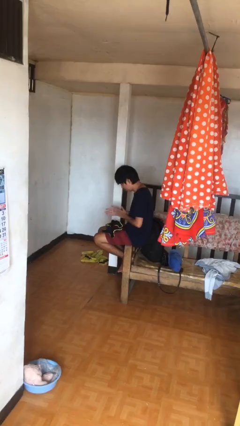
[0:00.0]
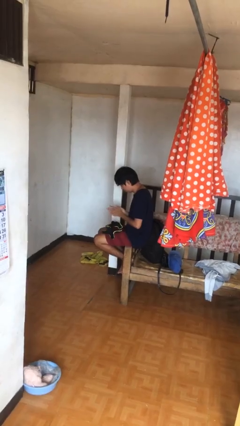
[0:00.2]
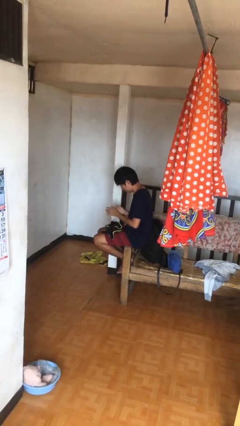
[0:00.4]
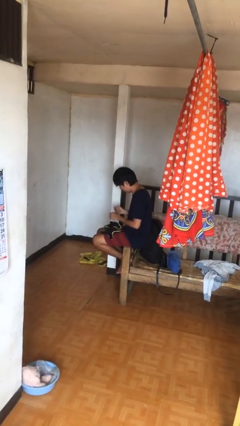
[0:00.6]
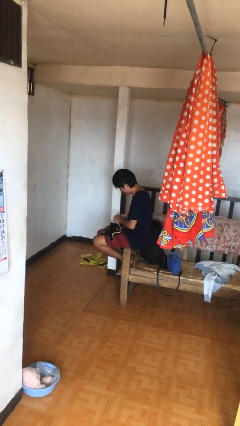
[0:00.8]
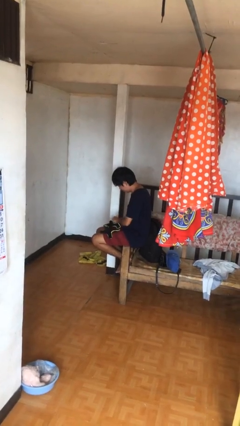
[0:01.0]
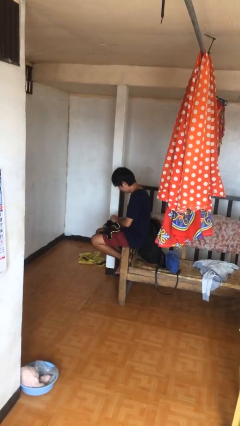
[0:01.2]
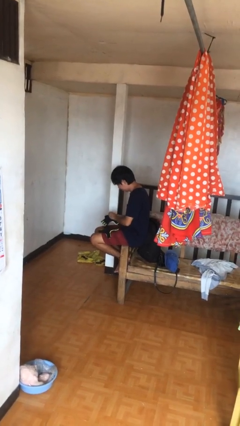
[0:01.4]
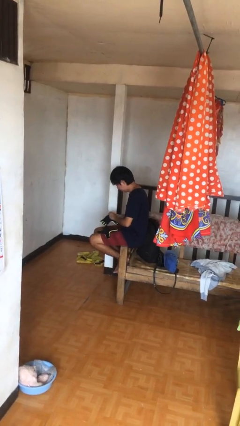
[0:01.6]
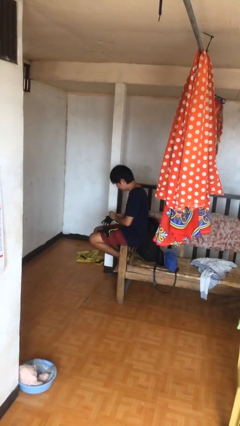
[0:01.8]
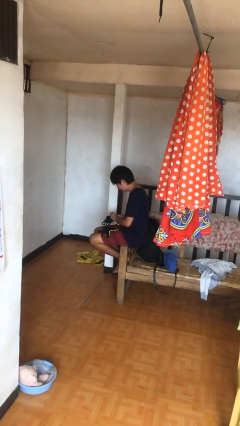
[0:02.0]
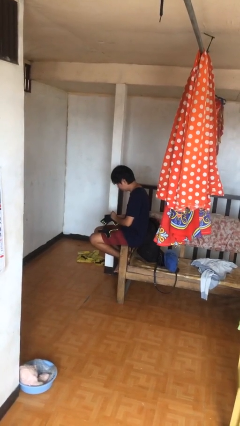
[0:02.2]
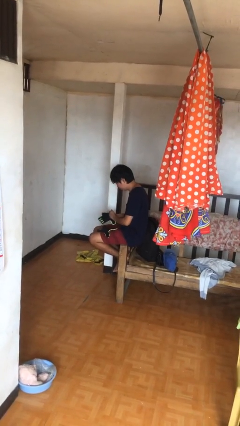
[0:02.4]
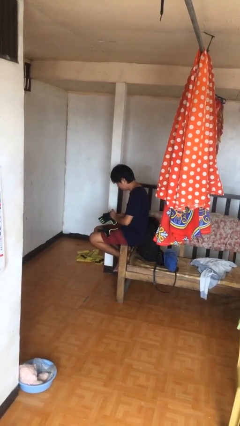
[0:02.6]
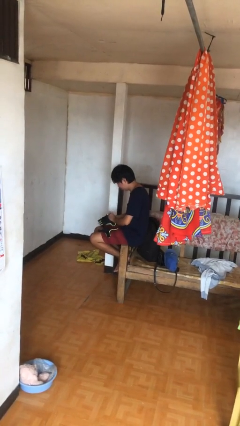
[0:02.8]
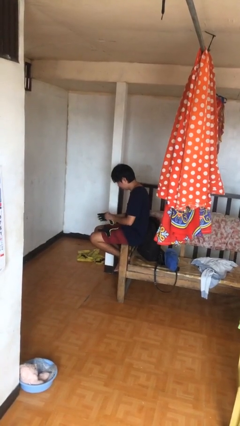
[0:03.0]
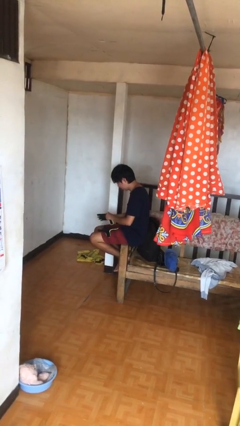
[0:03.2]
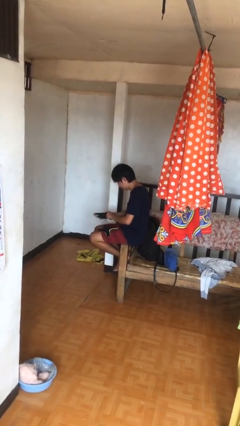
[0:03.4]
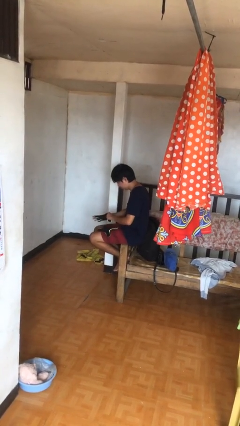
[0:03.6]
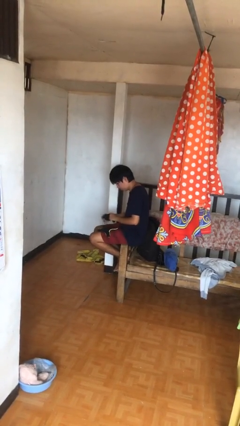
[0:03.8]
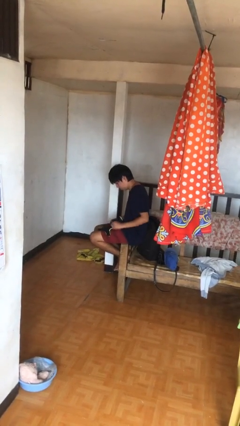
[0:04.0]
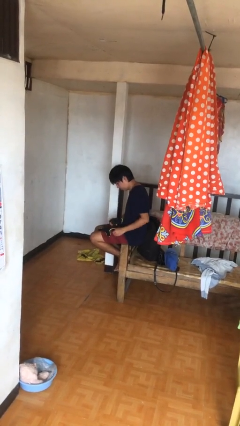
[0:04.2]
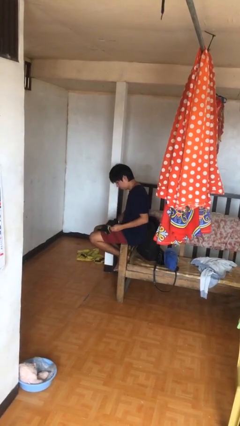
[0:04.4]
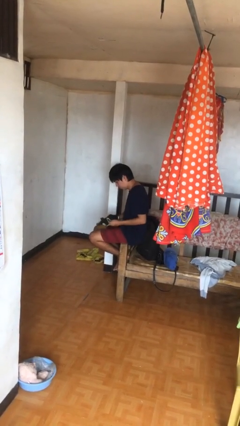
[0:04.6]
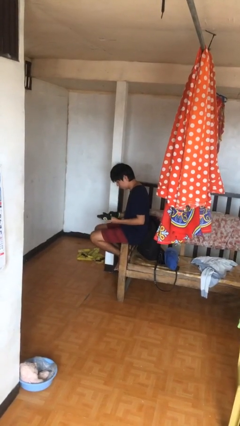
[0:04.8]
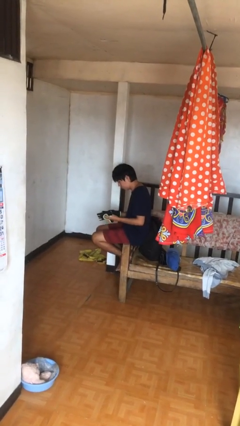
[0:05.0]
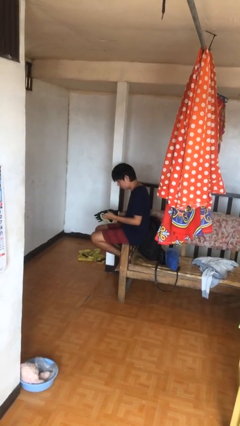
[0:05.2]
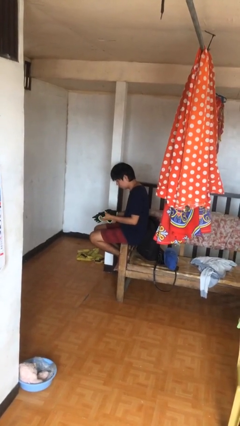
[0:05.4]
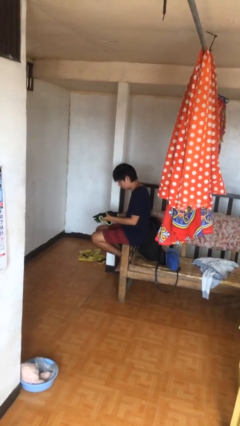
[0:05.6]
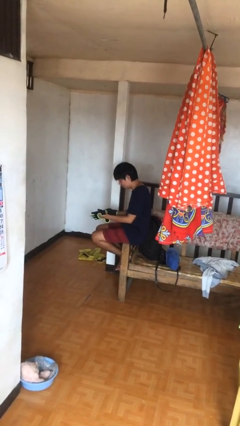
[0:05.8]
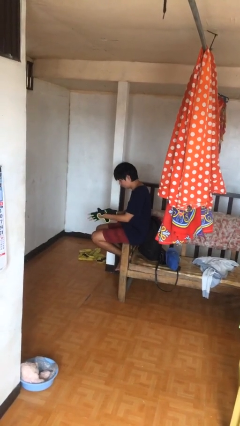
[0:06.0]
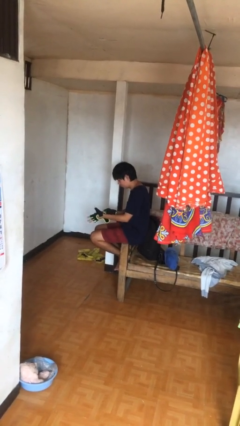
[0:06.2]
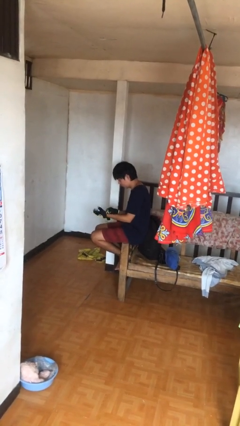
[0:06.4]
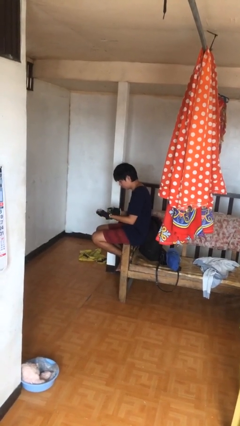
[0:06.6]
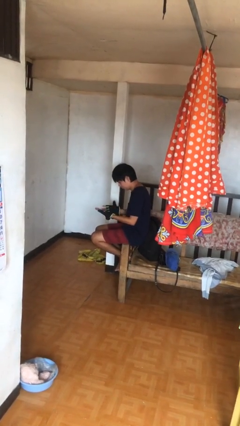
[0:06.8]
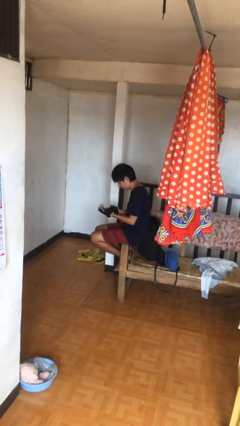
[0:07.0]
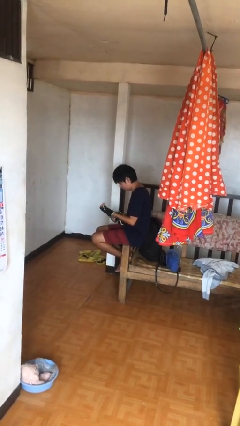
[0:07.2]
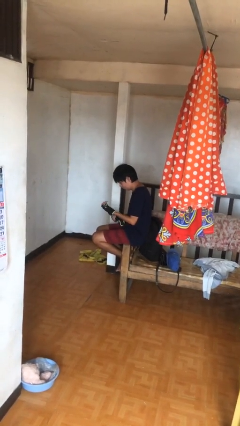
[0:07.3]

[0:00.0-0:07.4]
person puts on gloves

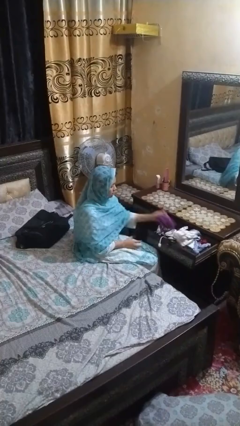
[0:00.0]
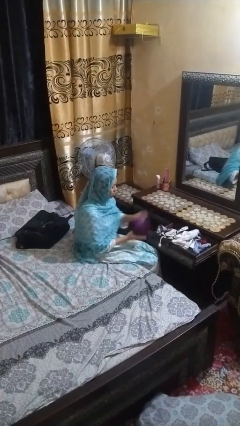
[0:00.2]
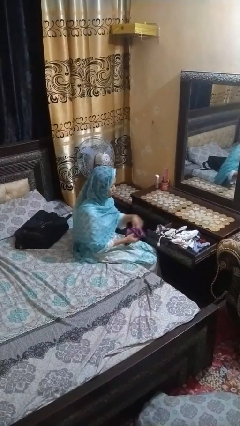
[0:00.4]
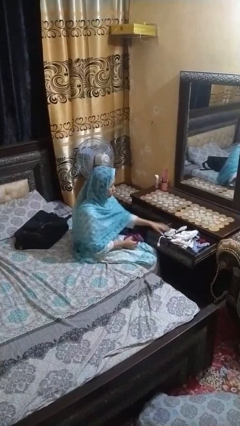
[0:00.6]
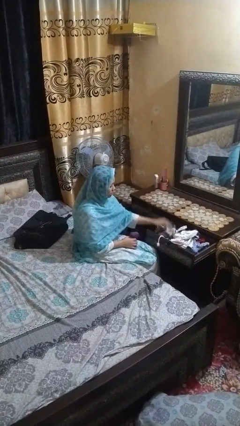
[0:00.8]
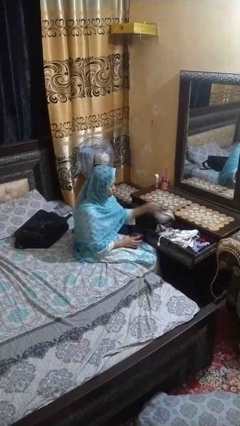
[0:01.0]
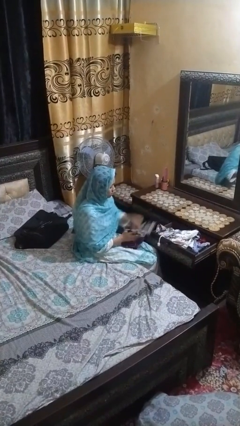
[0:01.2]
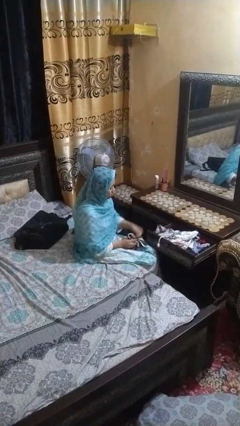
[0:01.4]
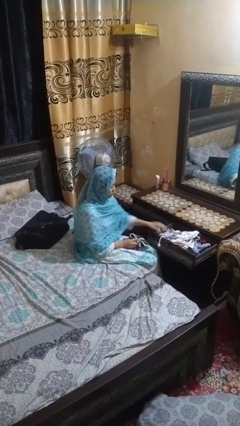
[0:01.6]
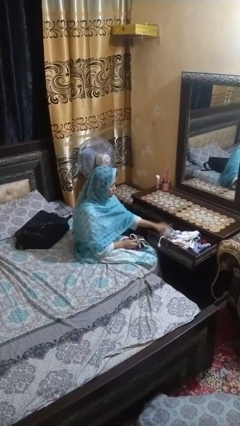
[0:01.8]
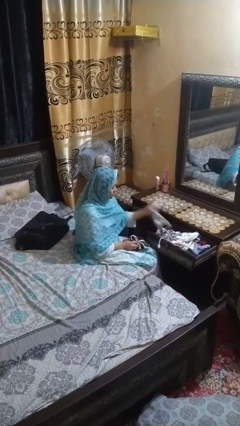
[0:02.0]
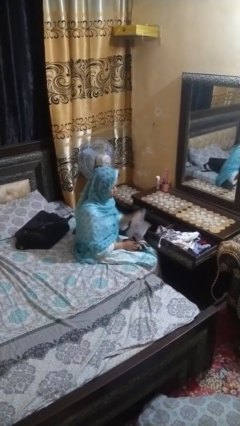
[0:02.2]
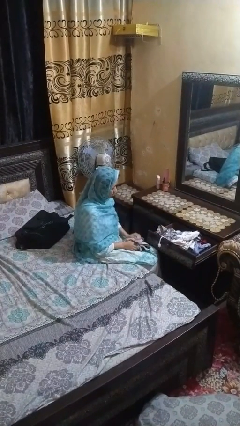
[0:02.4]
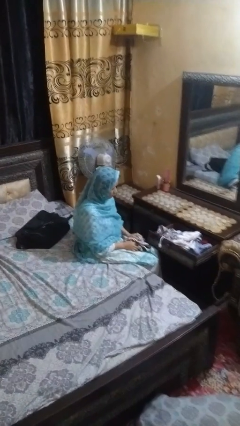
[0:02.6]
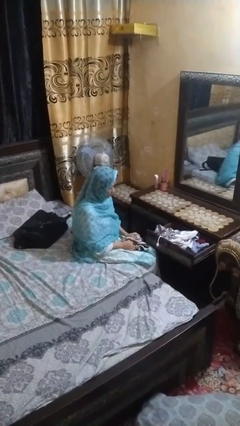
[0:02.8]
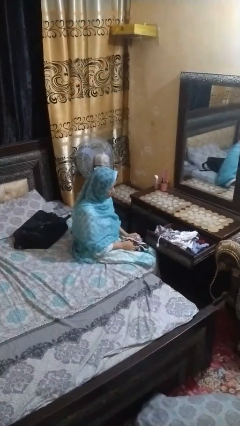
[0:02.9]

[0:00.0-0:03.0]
person takes clothes from dresser

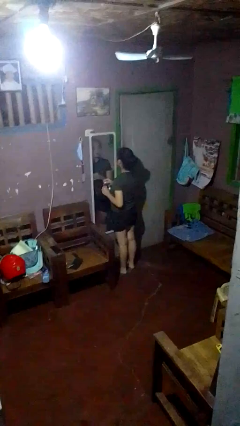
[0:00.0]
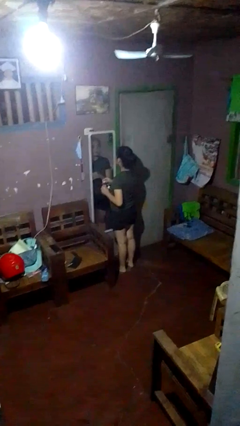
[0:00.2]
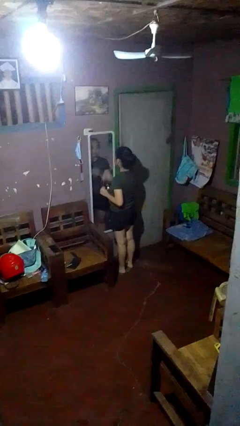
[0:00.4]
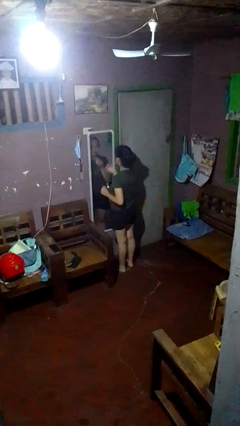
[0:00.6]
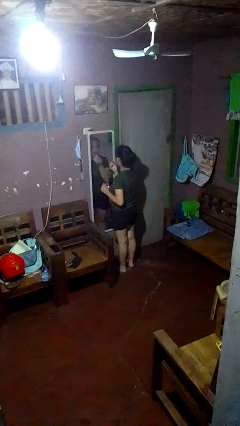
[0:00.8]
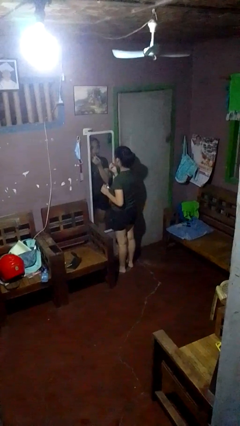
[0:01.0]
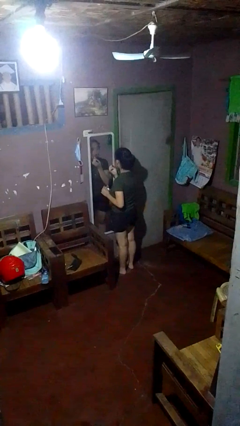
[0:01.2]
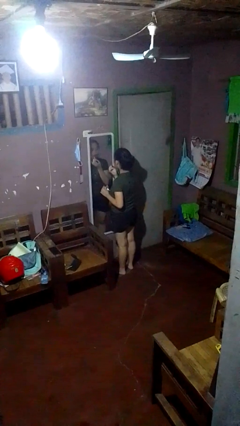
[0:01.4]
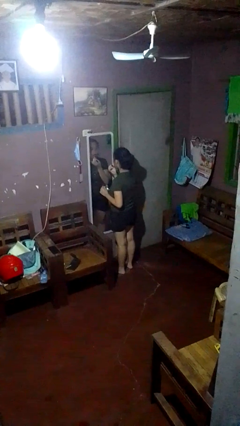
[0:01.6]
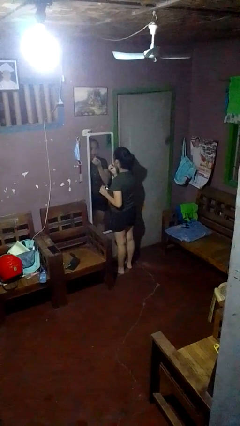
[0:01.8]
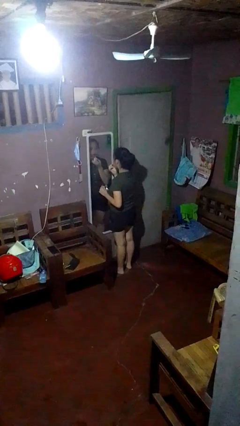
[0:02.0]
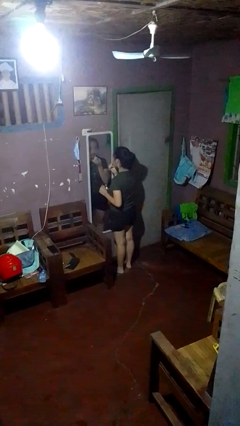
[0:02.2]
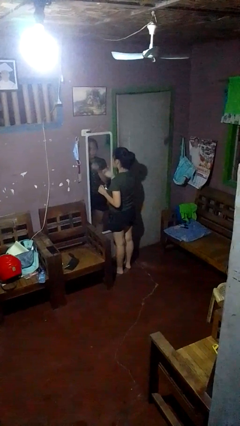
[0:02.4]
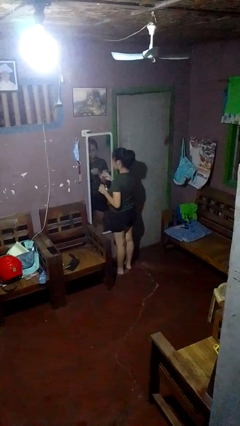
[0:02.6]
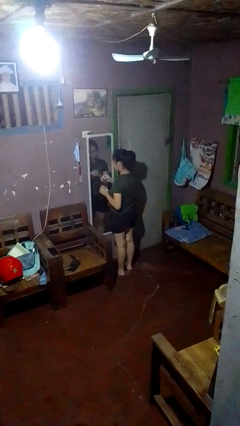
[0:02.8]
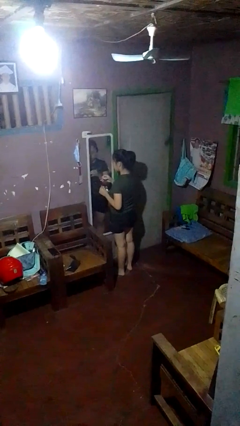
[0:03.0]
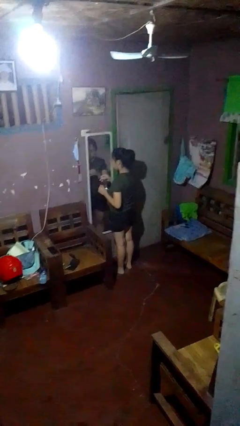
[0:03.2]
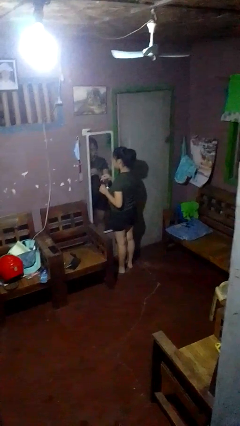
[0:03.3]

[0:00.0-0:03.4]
person applies lip makeup

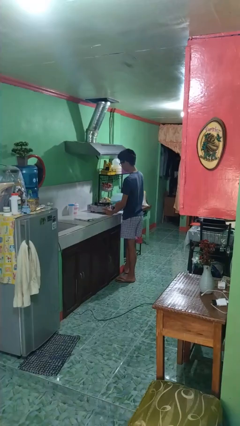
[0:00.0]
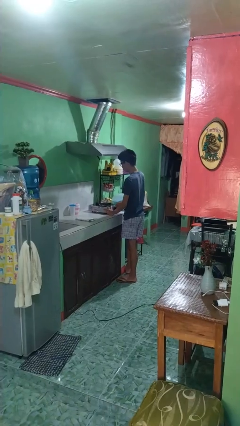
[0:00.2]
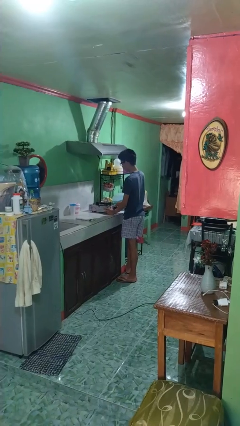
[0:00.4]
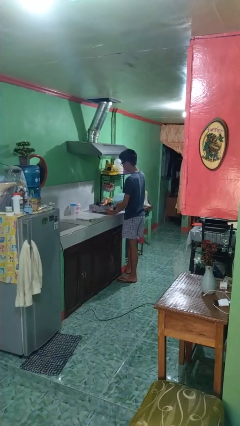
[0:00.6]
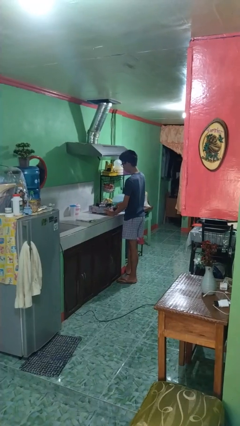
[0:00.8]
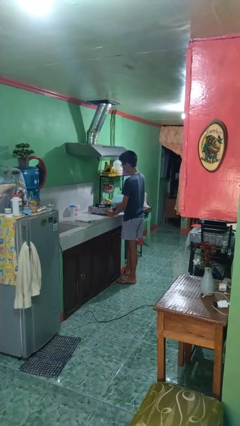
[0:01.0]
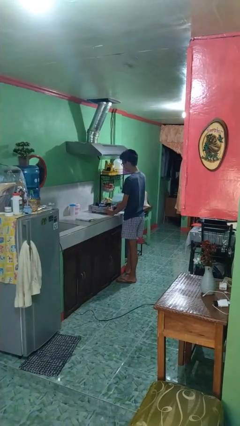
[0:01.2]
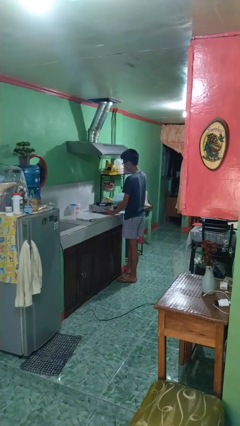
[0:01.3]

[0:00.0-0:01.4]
person turns on stovetop

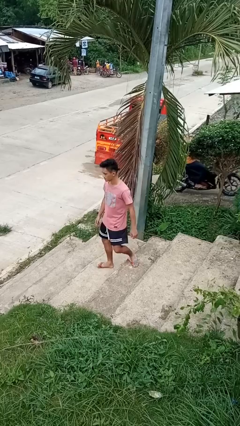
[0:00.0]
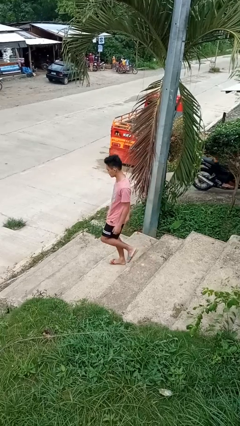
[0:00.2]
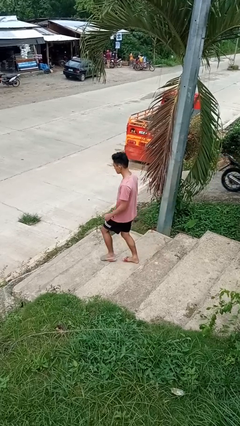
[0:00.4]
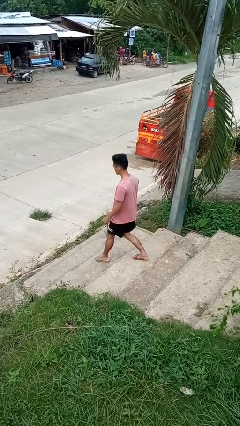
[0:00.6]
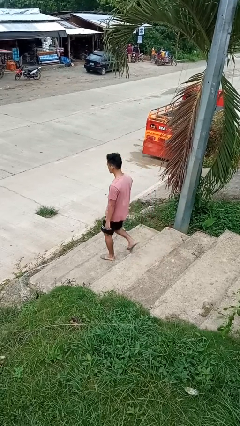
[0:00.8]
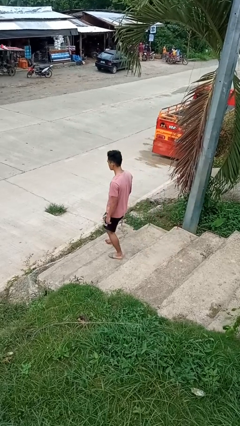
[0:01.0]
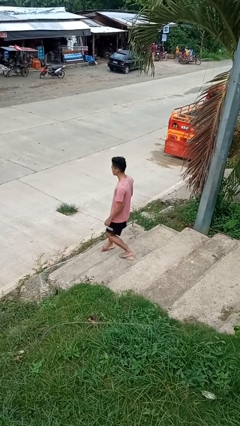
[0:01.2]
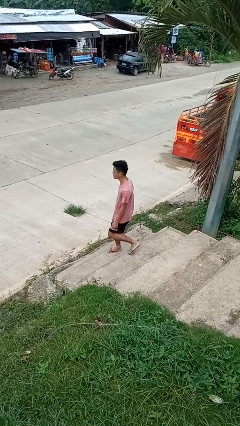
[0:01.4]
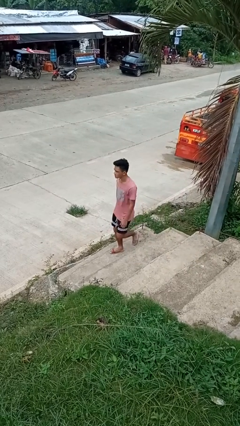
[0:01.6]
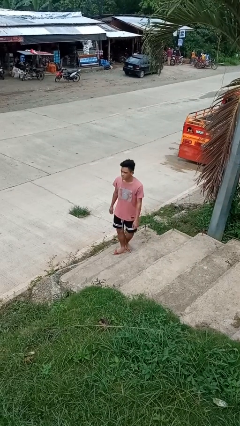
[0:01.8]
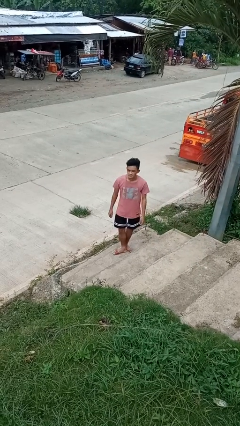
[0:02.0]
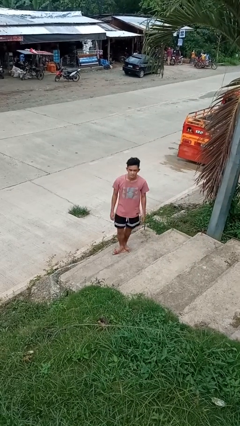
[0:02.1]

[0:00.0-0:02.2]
person climbs down stairs

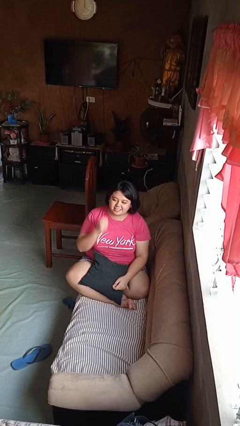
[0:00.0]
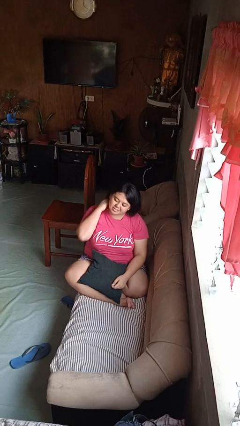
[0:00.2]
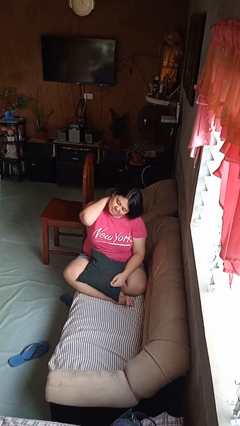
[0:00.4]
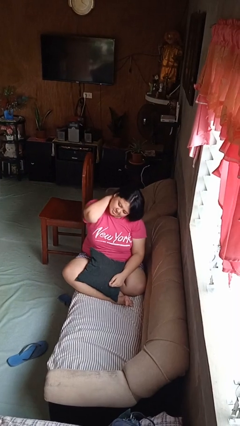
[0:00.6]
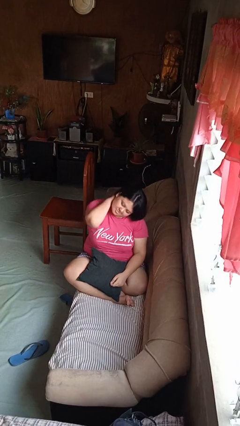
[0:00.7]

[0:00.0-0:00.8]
person rubs neck
